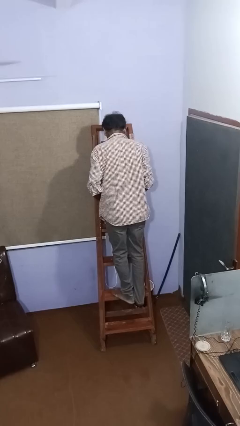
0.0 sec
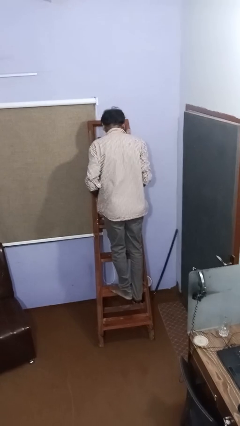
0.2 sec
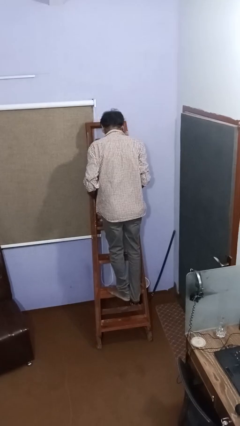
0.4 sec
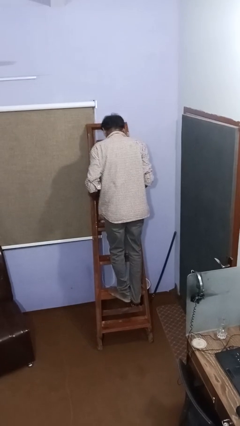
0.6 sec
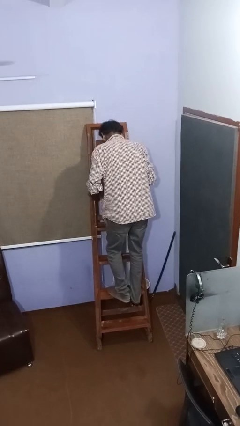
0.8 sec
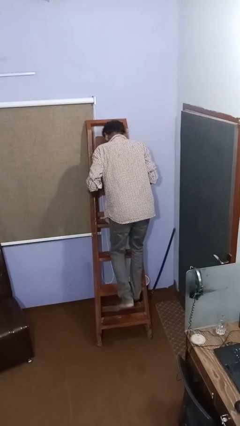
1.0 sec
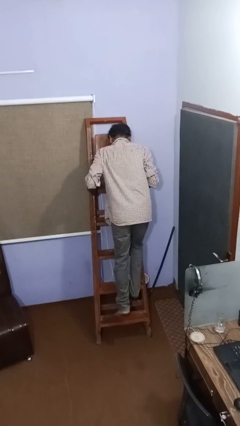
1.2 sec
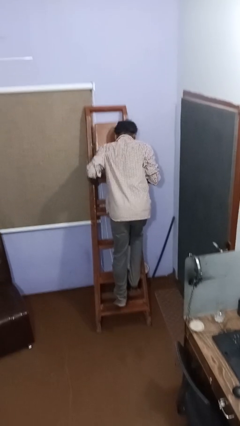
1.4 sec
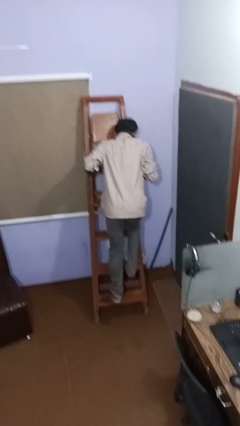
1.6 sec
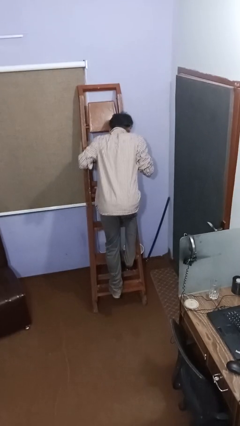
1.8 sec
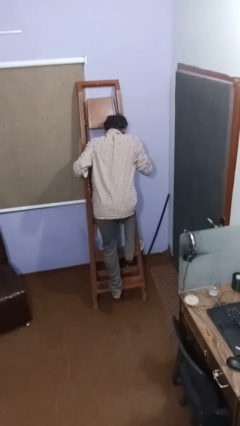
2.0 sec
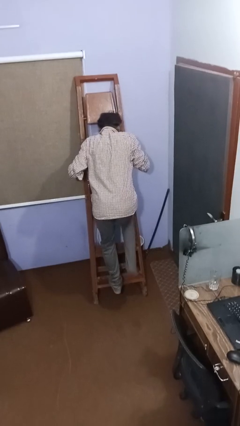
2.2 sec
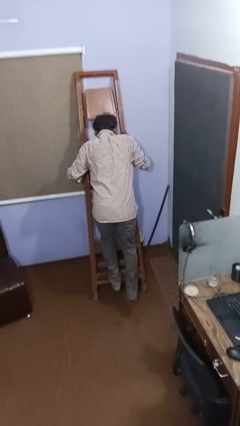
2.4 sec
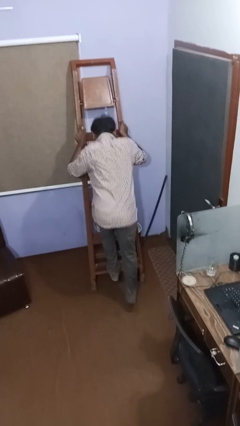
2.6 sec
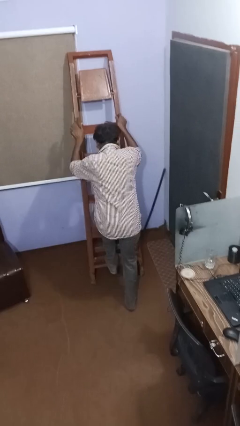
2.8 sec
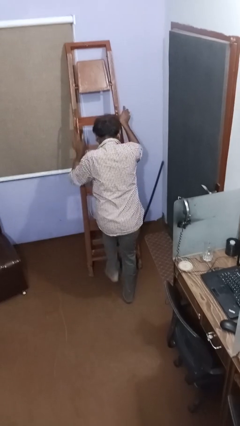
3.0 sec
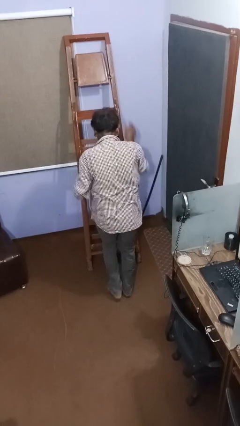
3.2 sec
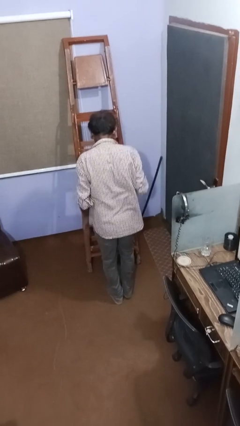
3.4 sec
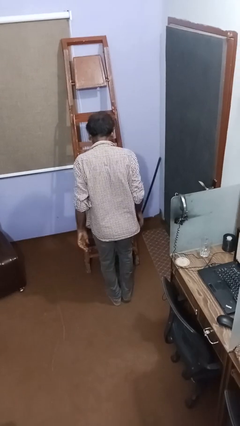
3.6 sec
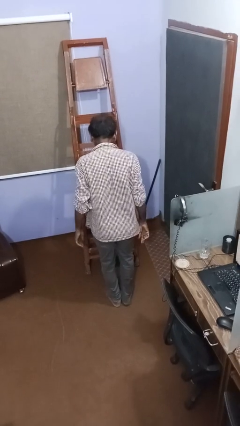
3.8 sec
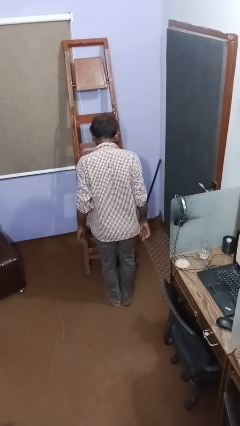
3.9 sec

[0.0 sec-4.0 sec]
person climbs down ladder

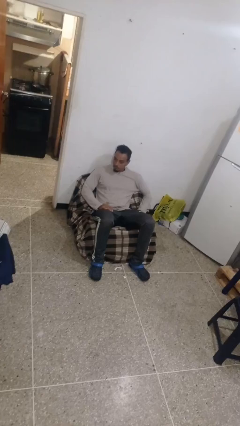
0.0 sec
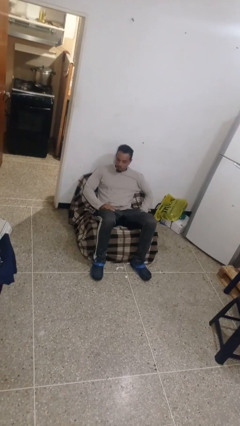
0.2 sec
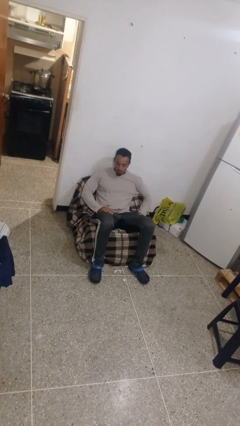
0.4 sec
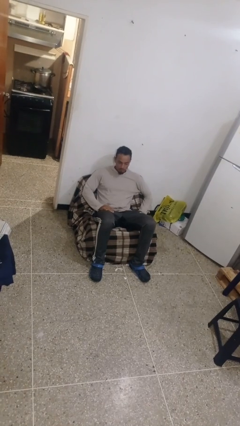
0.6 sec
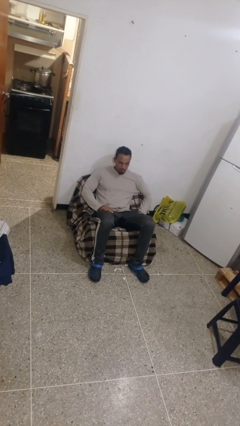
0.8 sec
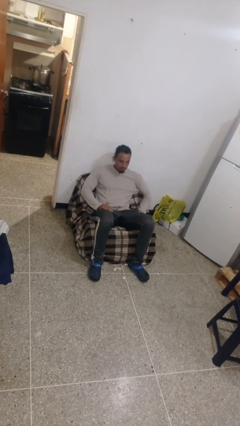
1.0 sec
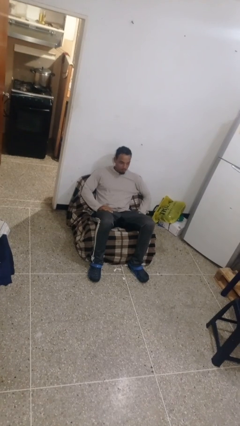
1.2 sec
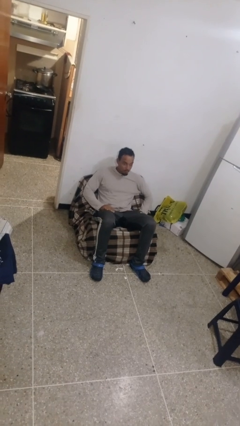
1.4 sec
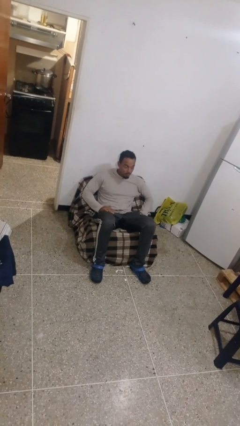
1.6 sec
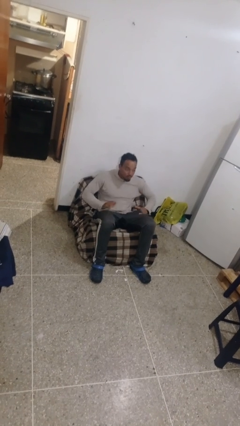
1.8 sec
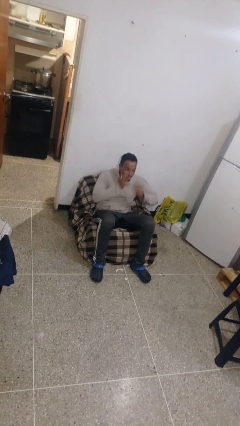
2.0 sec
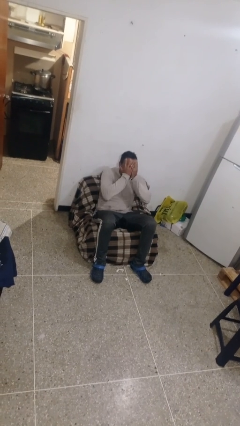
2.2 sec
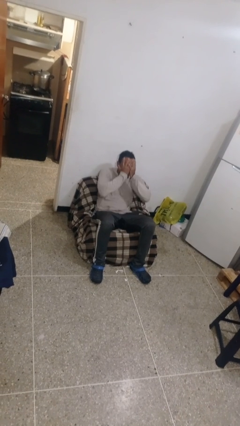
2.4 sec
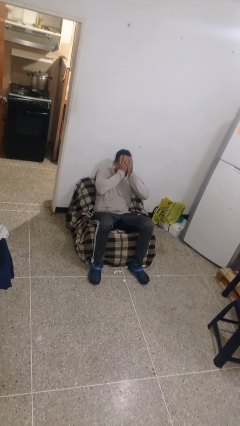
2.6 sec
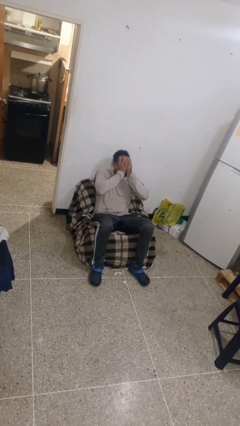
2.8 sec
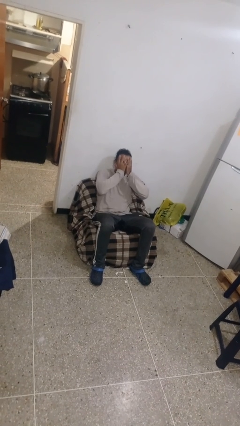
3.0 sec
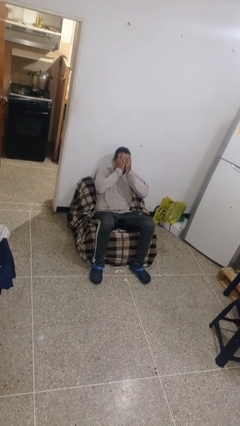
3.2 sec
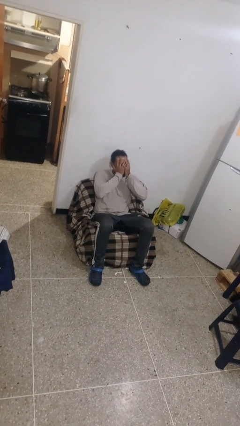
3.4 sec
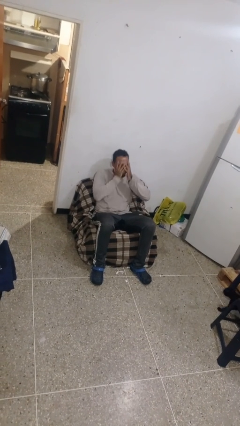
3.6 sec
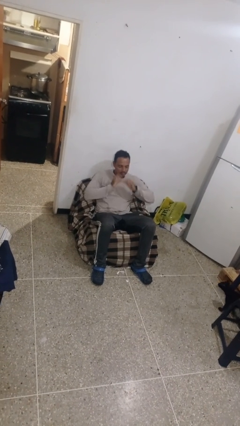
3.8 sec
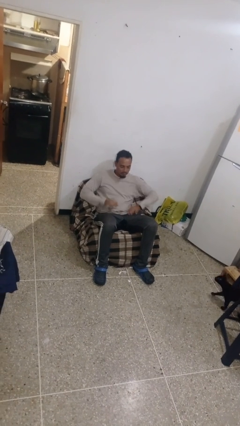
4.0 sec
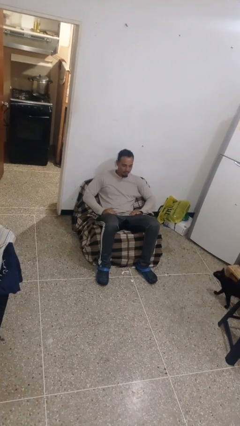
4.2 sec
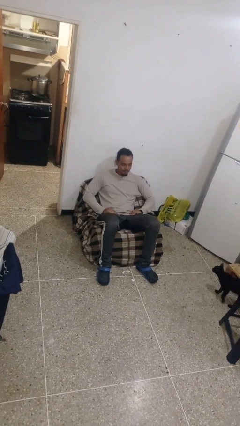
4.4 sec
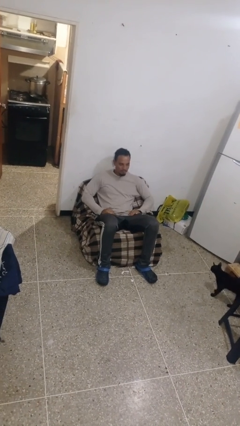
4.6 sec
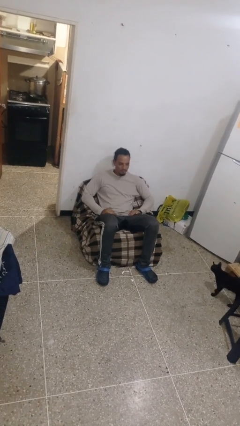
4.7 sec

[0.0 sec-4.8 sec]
person covers face with hands

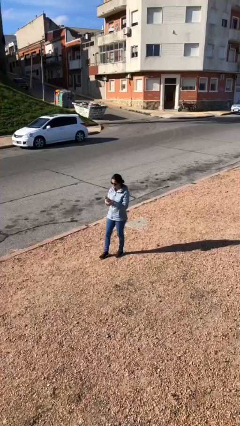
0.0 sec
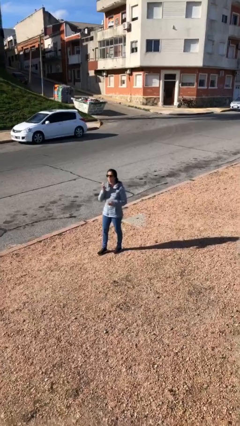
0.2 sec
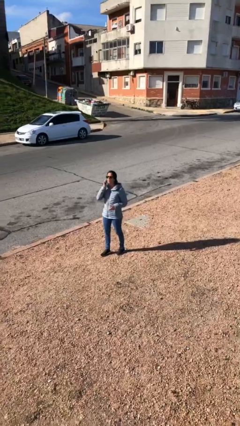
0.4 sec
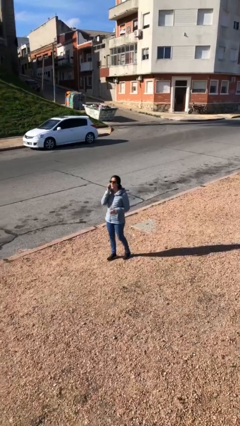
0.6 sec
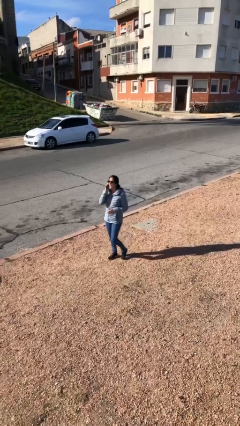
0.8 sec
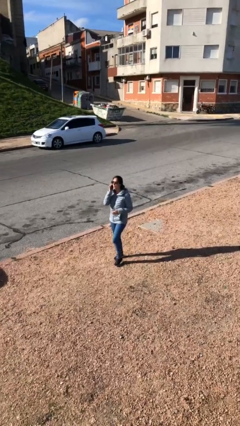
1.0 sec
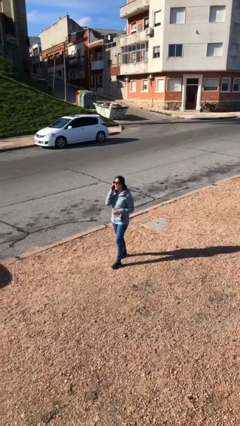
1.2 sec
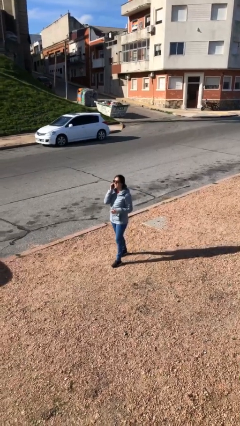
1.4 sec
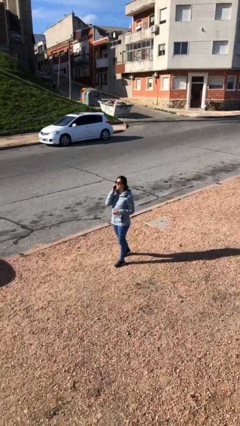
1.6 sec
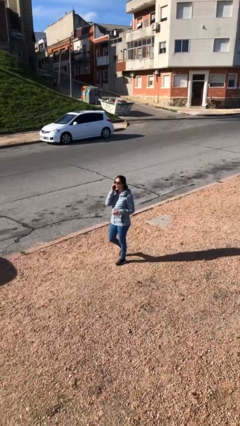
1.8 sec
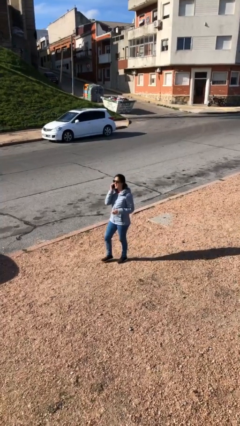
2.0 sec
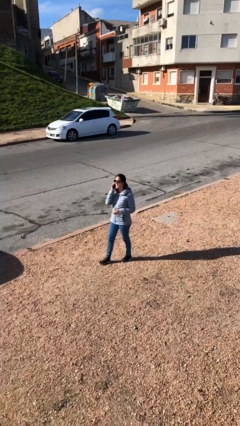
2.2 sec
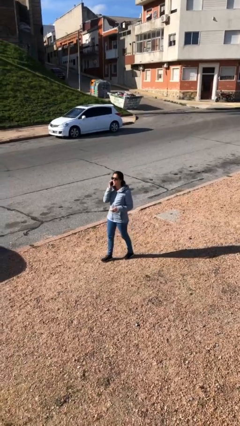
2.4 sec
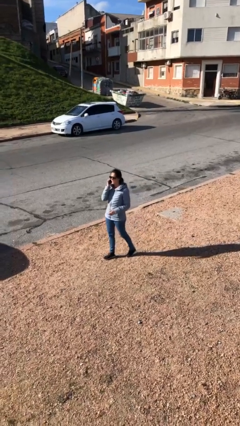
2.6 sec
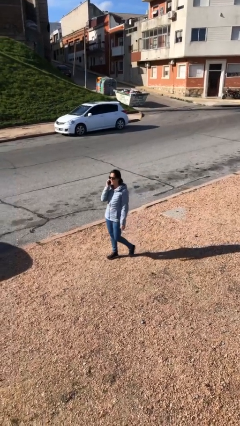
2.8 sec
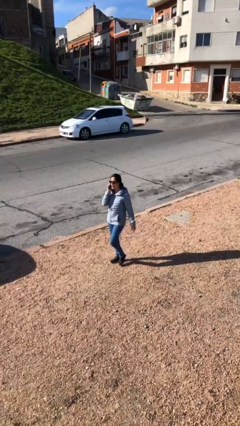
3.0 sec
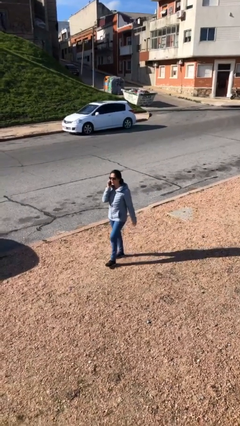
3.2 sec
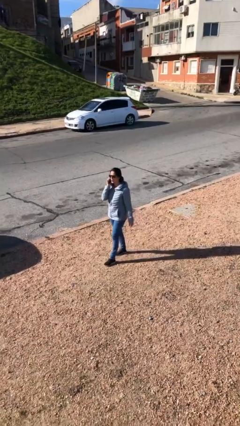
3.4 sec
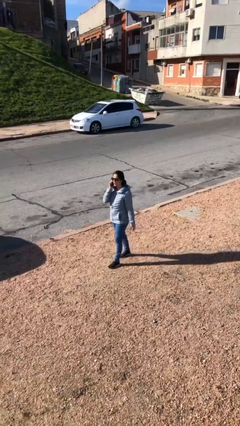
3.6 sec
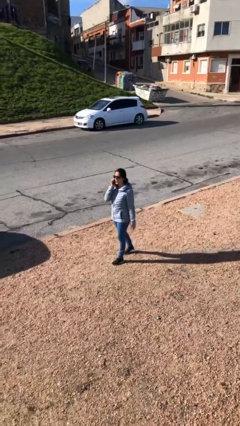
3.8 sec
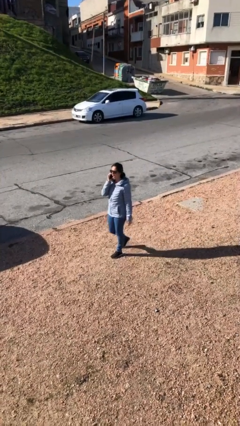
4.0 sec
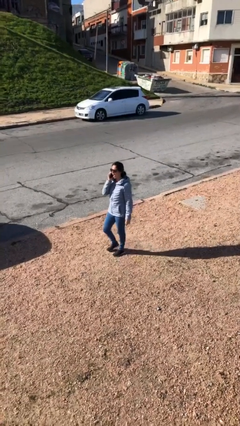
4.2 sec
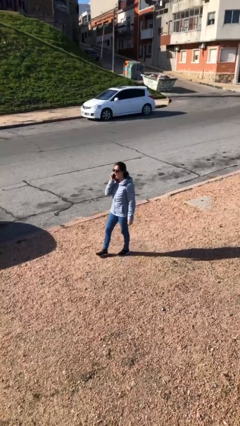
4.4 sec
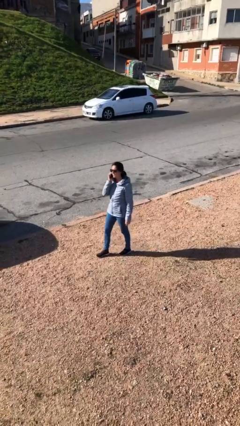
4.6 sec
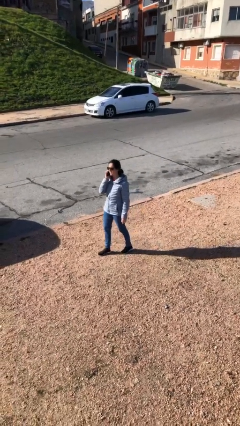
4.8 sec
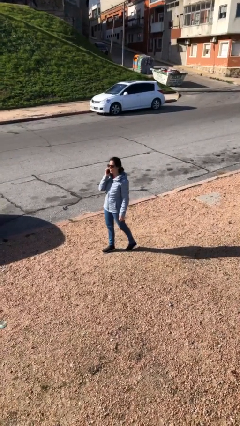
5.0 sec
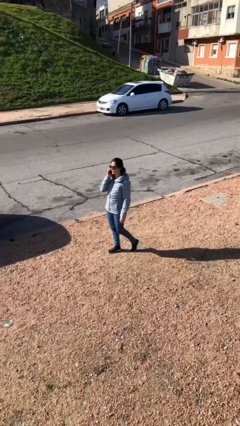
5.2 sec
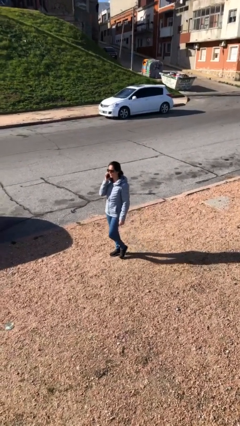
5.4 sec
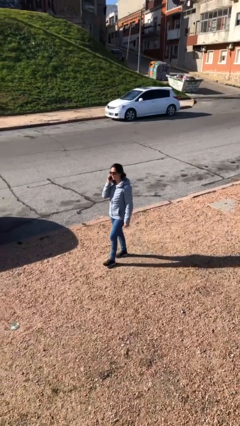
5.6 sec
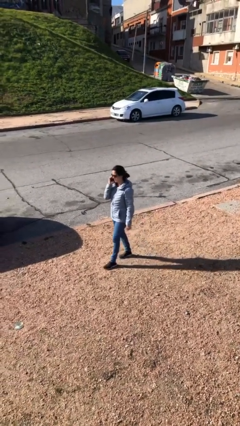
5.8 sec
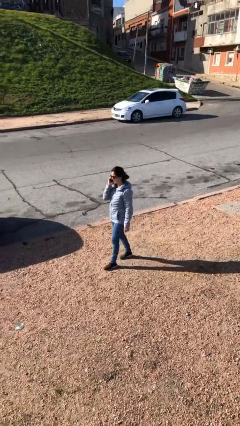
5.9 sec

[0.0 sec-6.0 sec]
person talks on phone

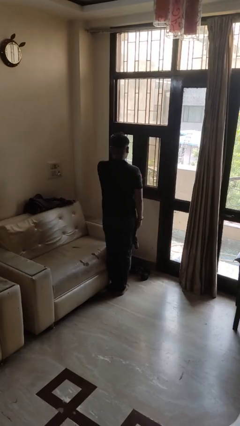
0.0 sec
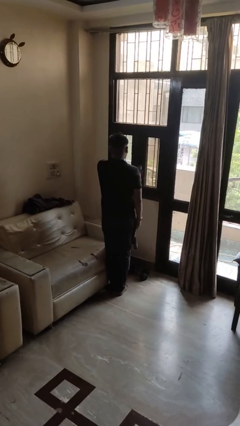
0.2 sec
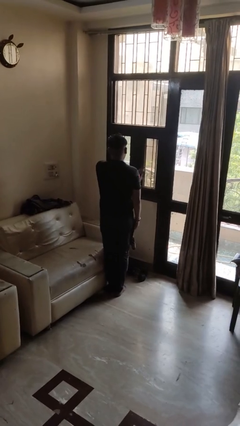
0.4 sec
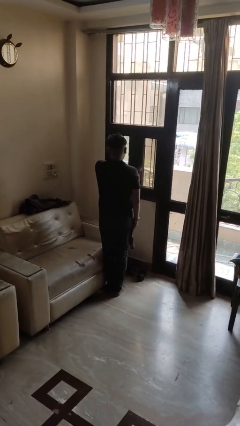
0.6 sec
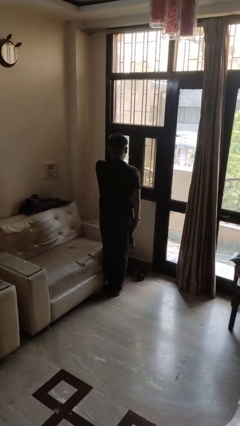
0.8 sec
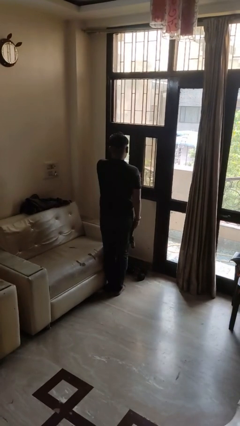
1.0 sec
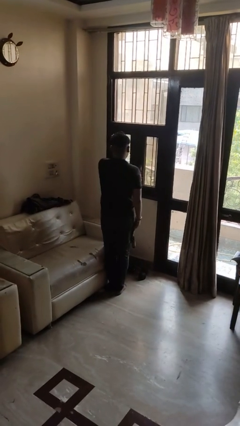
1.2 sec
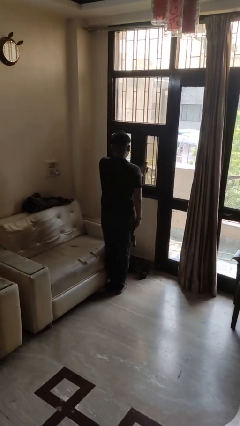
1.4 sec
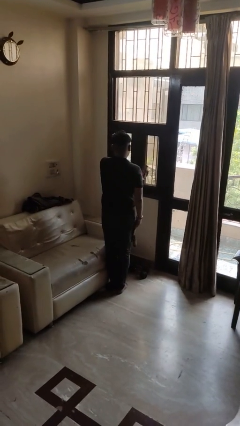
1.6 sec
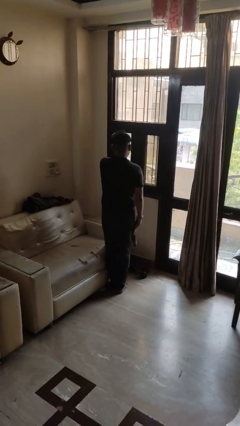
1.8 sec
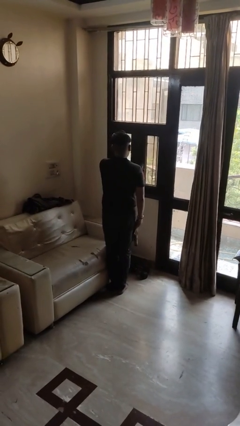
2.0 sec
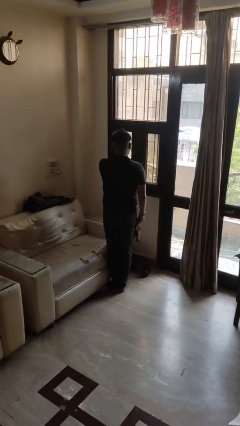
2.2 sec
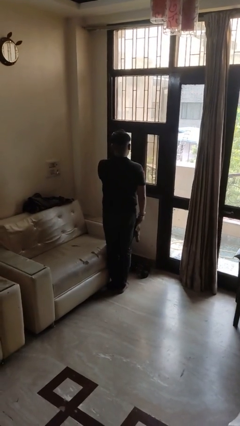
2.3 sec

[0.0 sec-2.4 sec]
person sprays from bottle

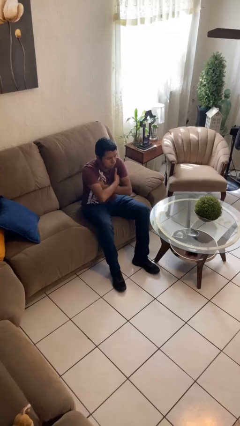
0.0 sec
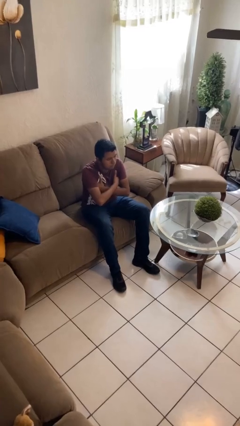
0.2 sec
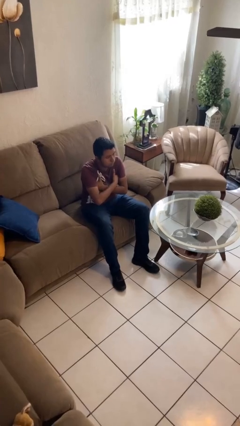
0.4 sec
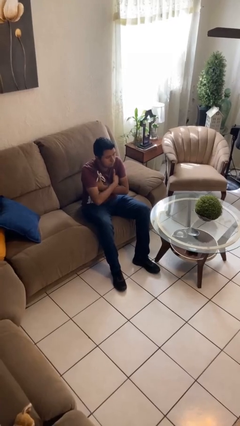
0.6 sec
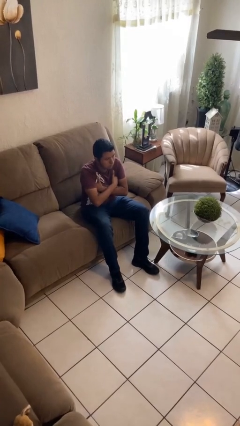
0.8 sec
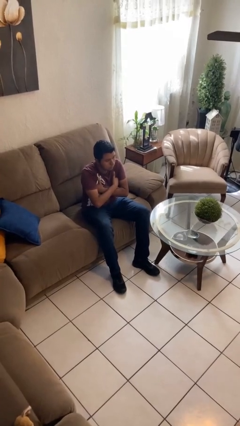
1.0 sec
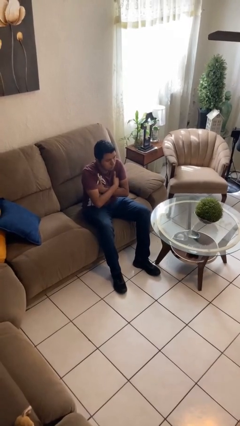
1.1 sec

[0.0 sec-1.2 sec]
person gestures arms x
